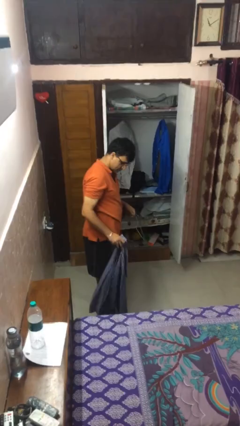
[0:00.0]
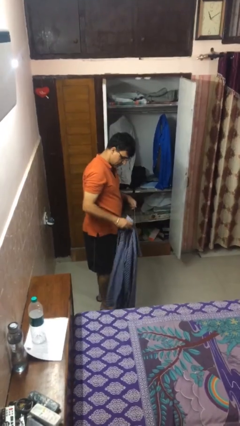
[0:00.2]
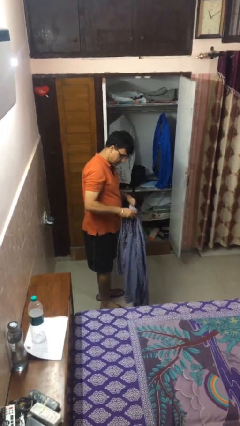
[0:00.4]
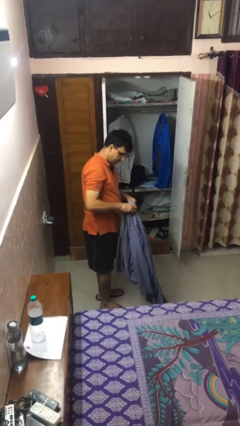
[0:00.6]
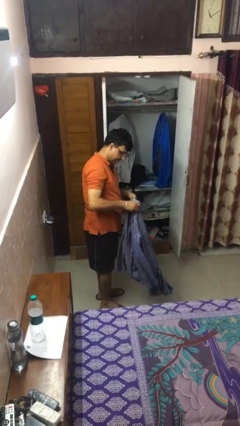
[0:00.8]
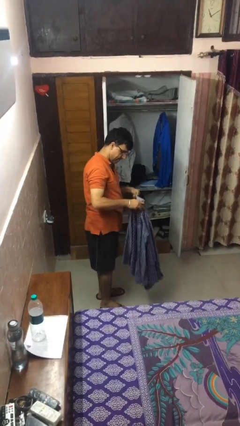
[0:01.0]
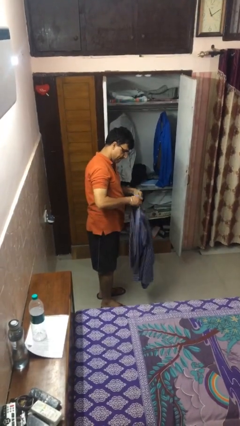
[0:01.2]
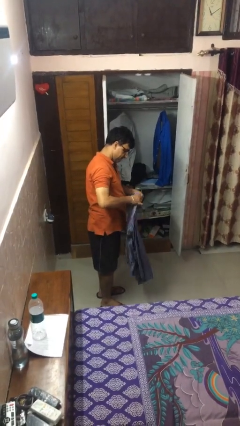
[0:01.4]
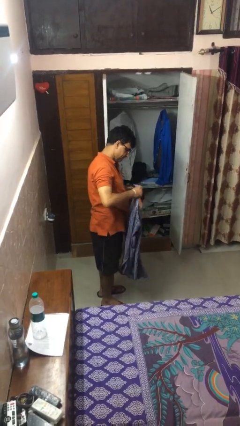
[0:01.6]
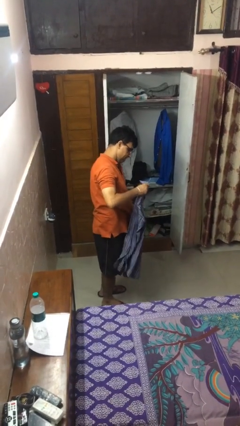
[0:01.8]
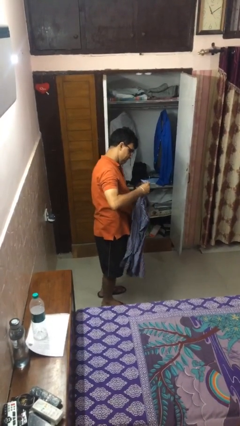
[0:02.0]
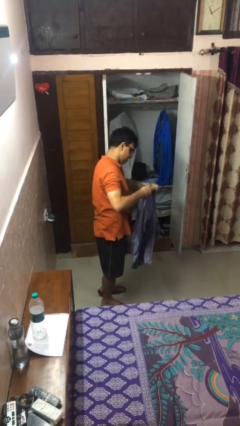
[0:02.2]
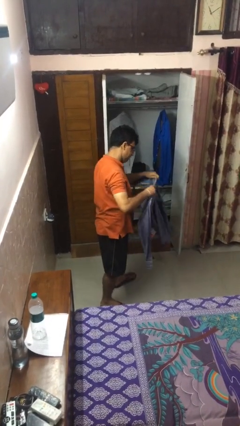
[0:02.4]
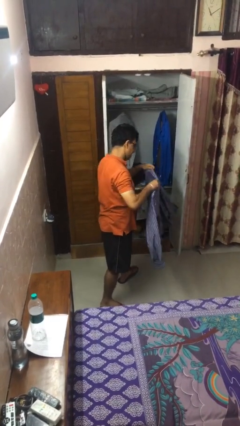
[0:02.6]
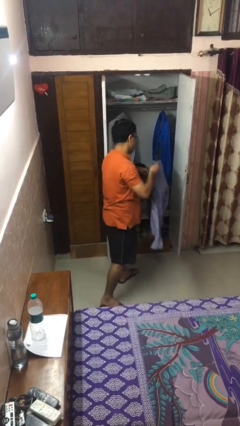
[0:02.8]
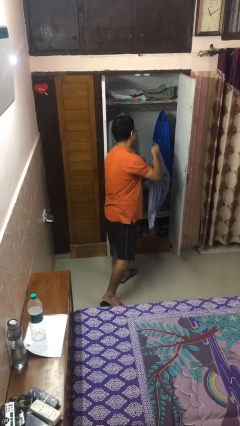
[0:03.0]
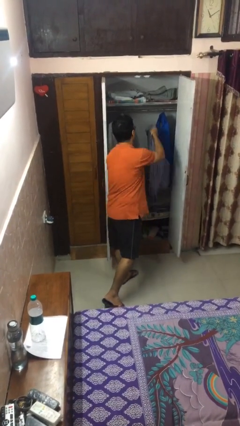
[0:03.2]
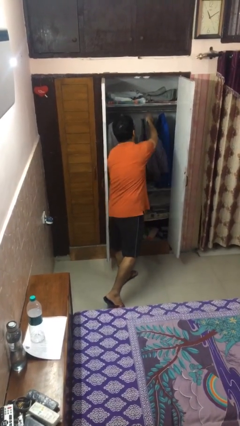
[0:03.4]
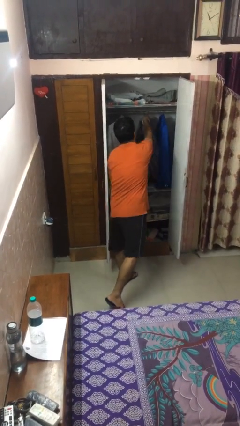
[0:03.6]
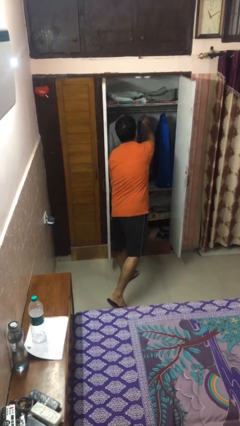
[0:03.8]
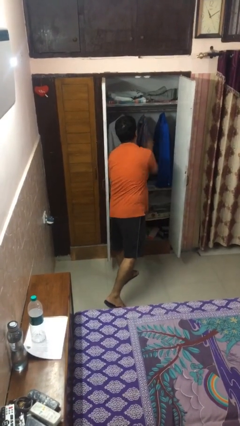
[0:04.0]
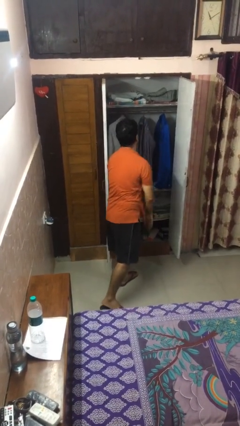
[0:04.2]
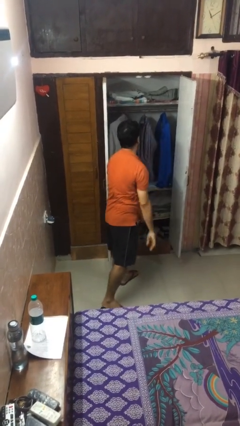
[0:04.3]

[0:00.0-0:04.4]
person puts clothes into closet
